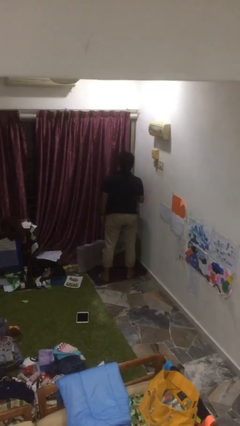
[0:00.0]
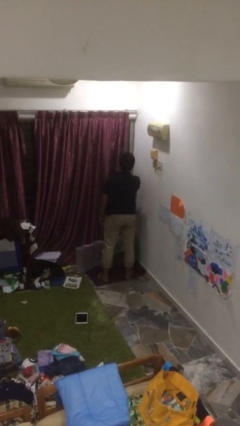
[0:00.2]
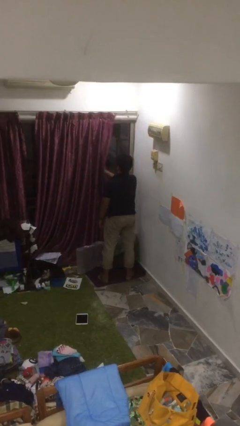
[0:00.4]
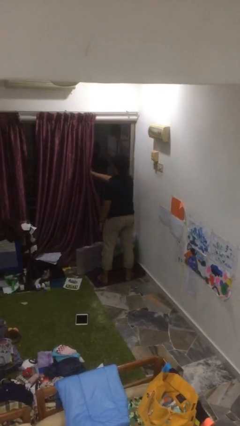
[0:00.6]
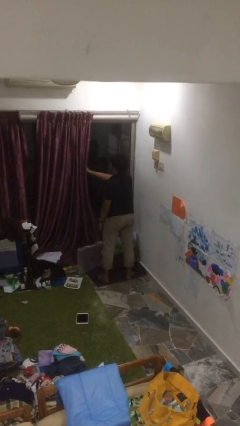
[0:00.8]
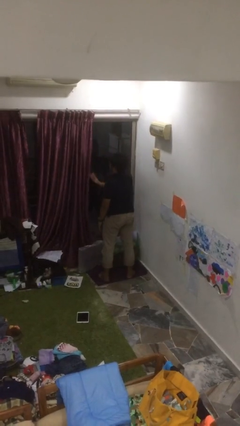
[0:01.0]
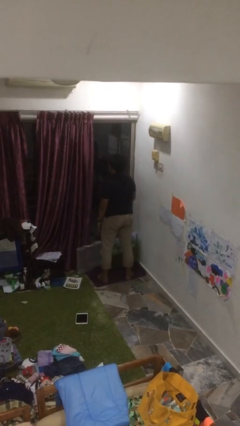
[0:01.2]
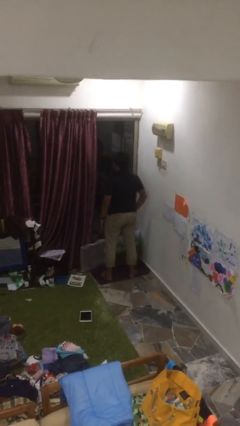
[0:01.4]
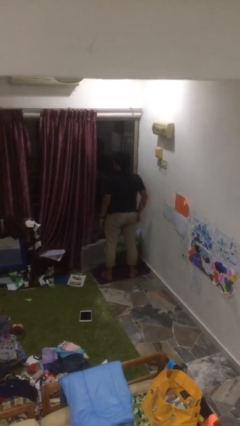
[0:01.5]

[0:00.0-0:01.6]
person opens curtains

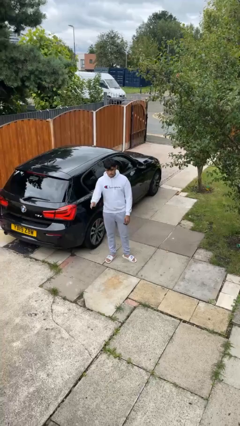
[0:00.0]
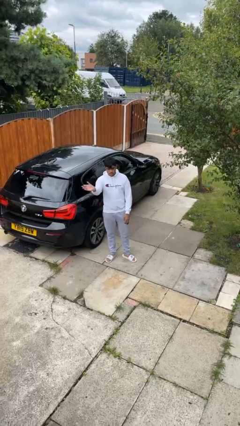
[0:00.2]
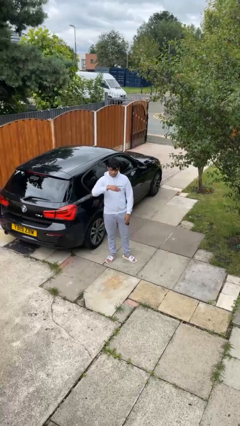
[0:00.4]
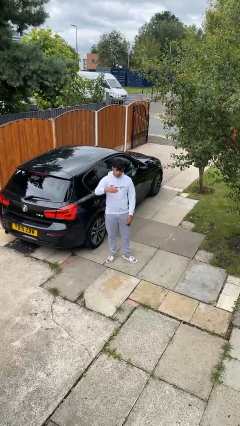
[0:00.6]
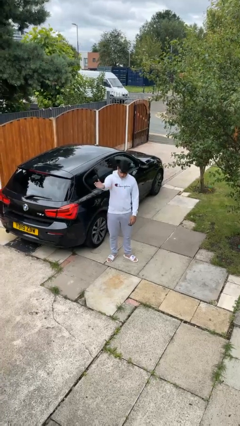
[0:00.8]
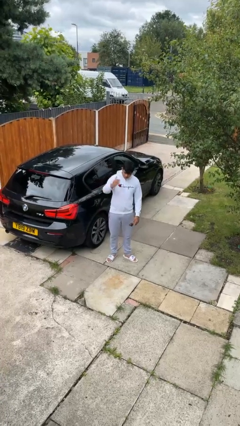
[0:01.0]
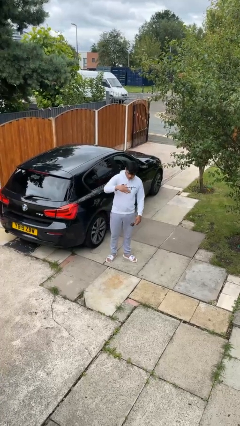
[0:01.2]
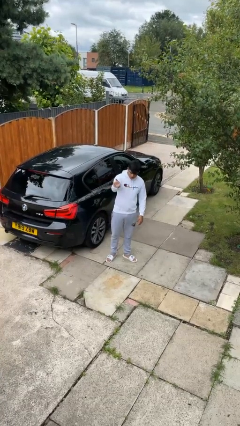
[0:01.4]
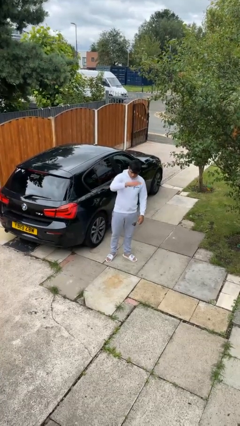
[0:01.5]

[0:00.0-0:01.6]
person gestures come here

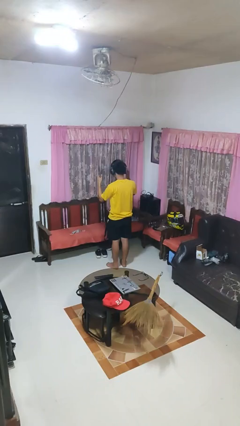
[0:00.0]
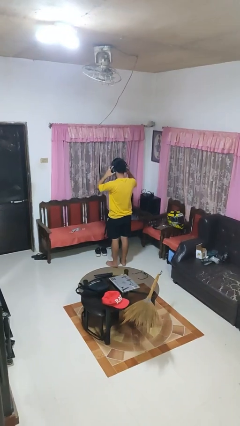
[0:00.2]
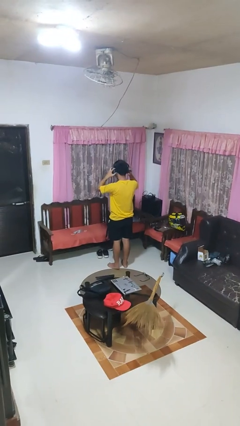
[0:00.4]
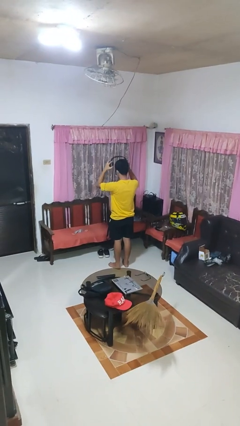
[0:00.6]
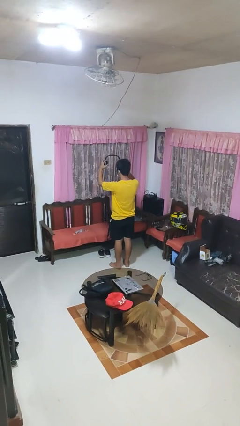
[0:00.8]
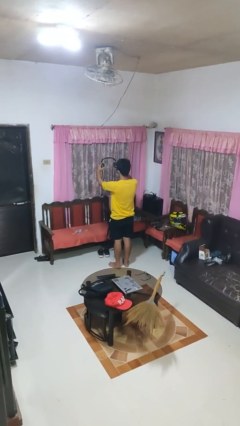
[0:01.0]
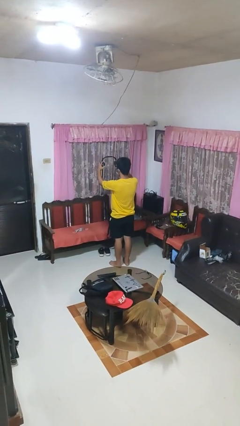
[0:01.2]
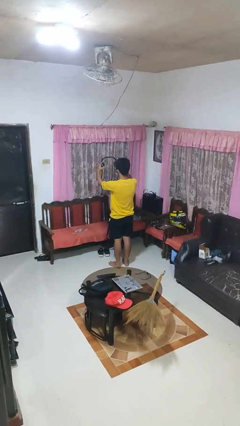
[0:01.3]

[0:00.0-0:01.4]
person takes off headphones

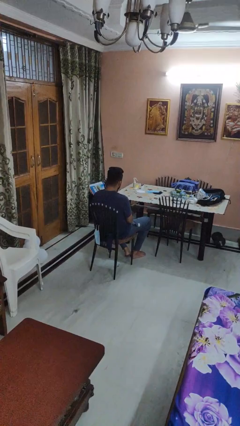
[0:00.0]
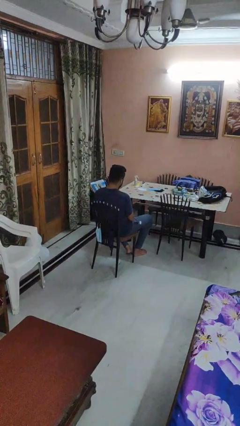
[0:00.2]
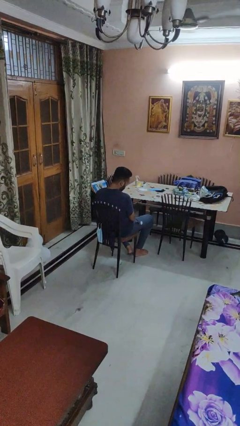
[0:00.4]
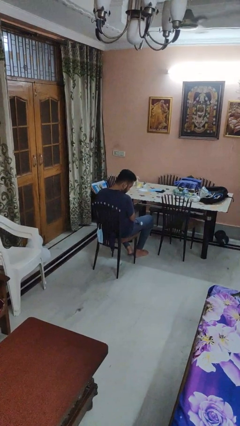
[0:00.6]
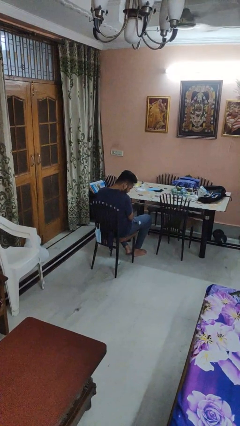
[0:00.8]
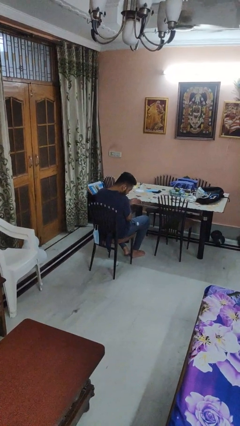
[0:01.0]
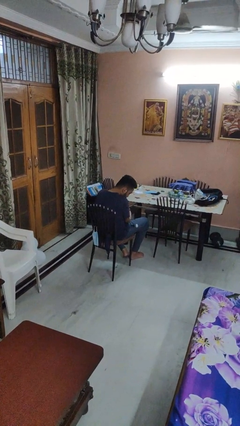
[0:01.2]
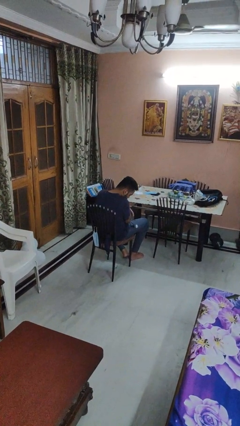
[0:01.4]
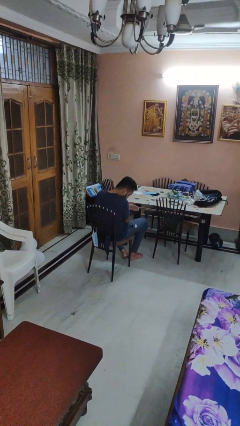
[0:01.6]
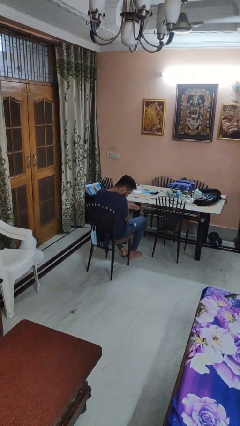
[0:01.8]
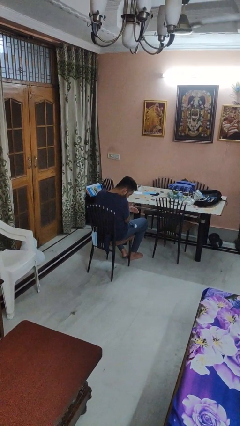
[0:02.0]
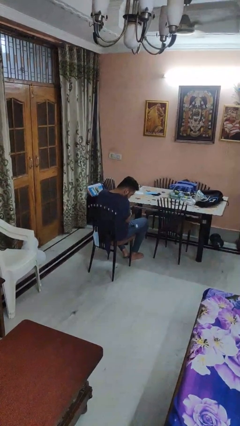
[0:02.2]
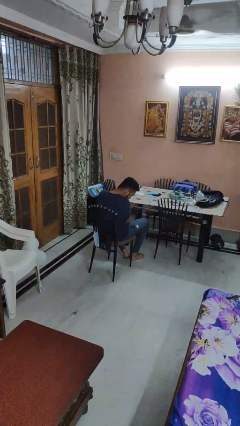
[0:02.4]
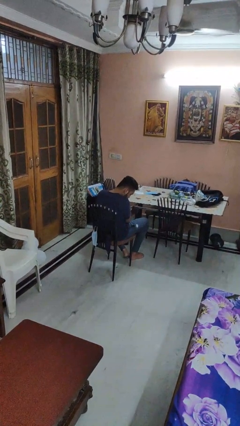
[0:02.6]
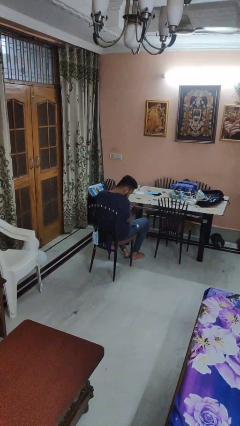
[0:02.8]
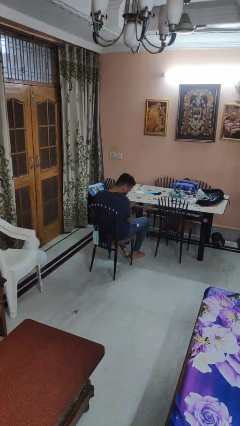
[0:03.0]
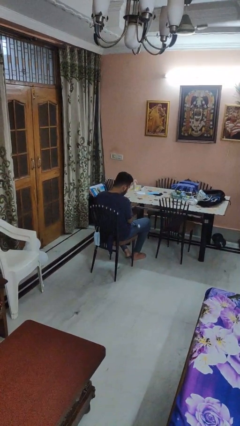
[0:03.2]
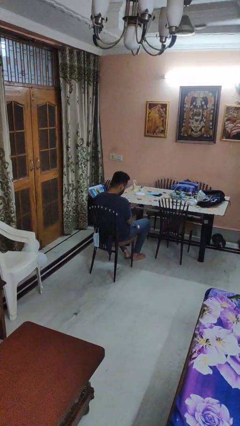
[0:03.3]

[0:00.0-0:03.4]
person swats bug

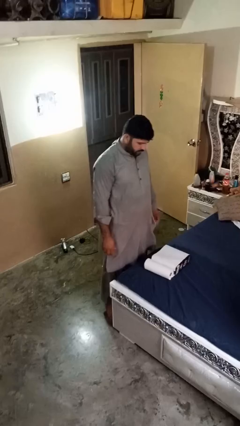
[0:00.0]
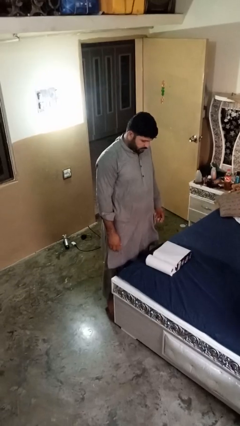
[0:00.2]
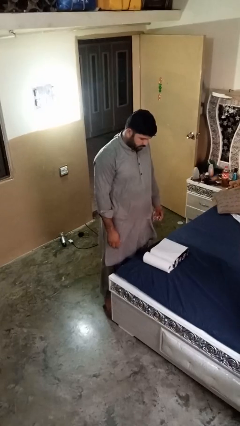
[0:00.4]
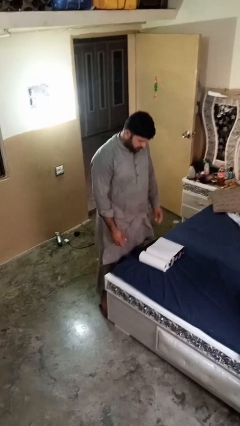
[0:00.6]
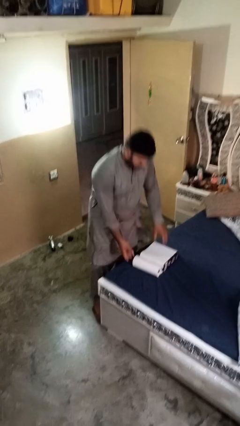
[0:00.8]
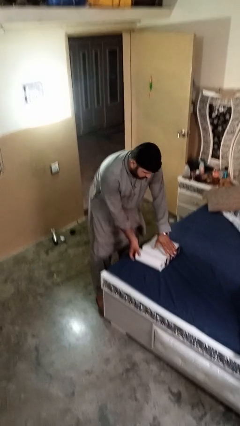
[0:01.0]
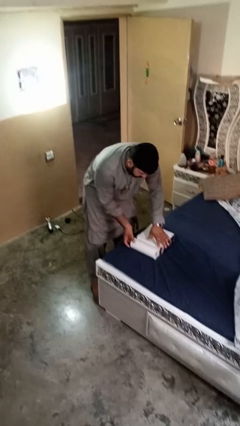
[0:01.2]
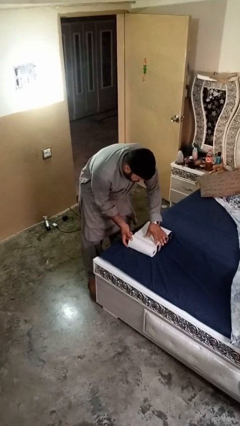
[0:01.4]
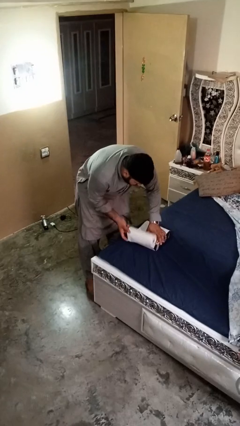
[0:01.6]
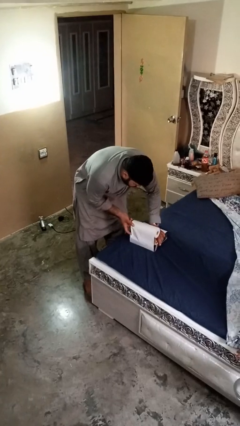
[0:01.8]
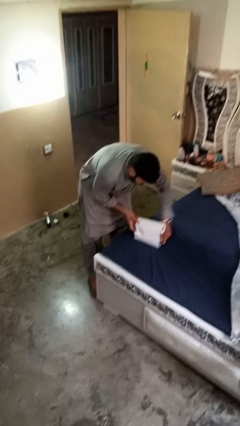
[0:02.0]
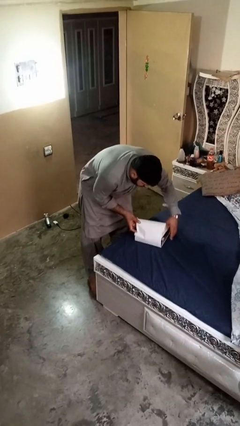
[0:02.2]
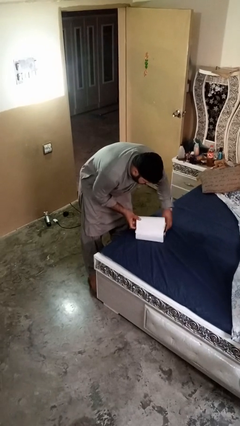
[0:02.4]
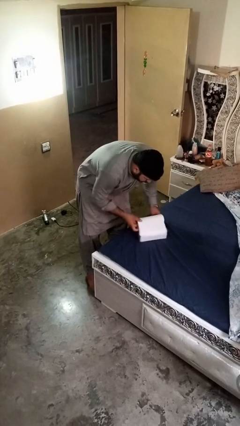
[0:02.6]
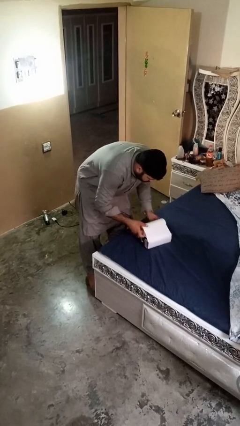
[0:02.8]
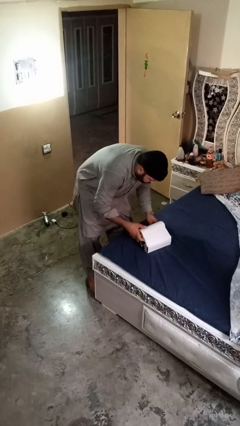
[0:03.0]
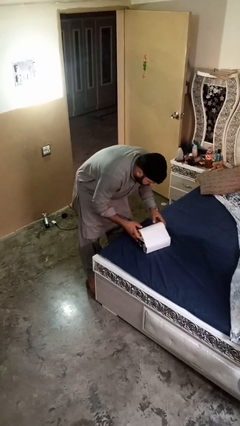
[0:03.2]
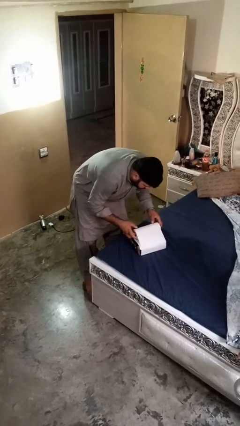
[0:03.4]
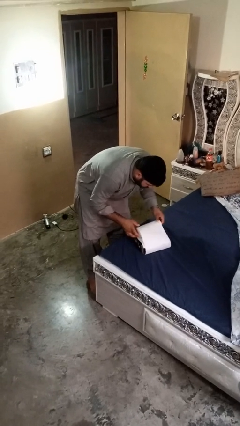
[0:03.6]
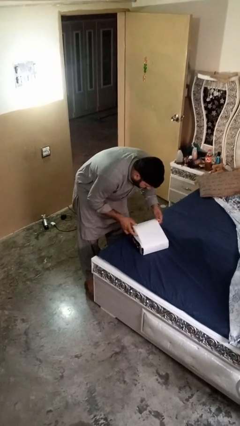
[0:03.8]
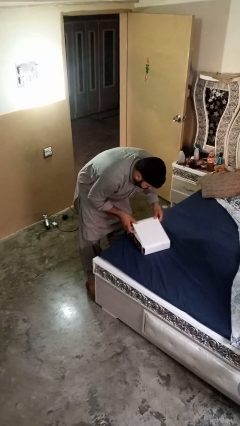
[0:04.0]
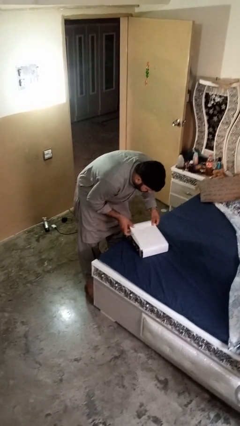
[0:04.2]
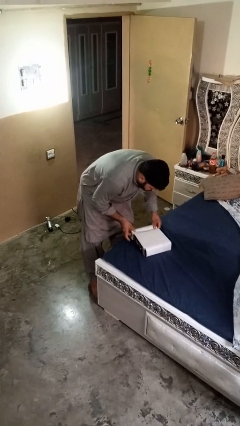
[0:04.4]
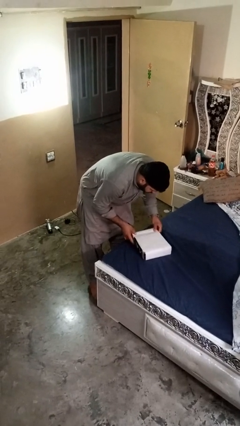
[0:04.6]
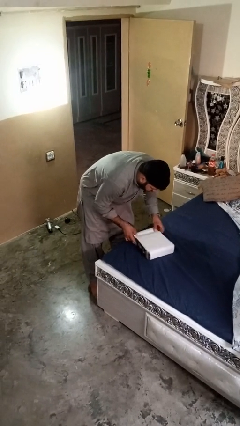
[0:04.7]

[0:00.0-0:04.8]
person wraps box

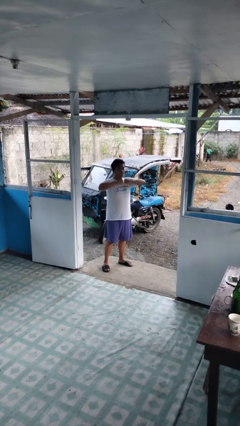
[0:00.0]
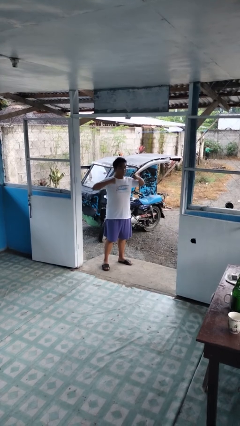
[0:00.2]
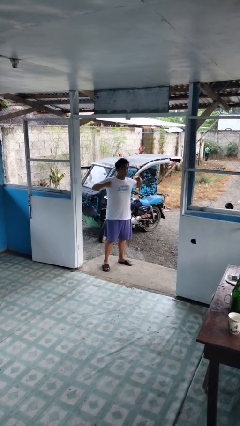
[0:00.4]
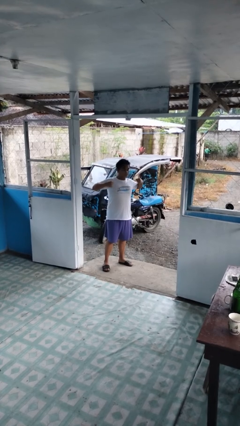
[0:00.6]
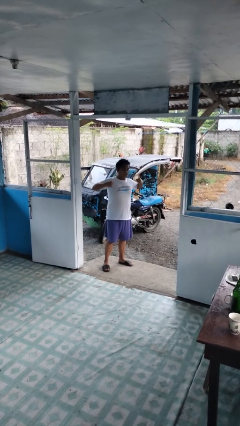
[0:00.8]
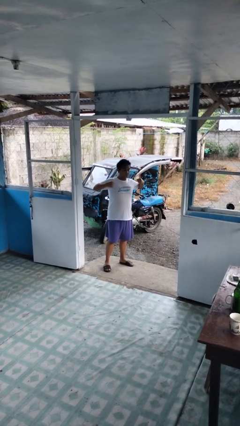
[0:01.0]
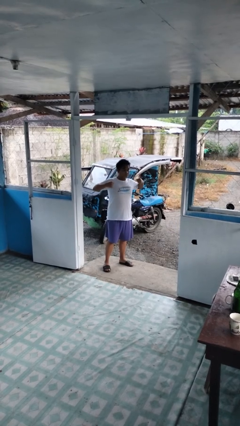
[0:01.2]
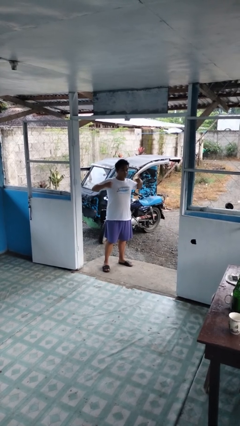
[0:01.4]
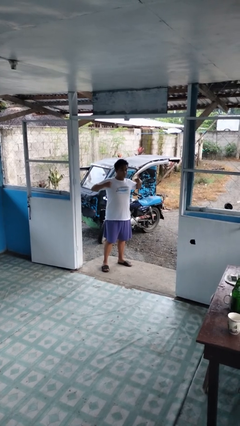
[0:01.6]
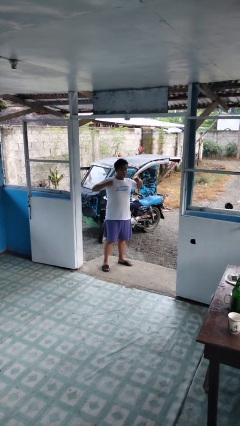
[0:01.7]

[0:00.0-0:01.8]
person gestures zoom in

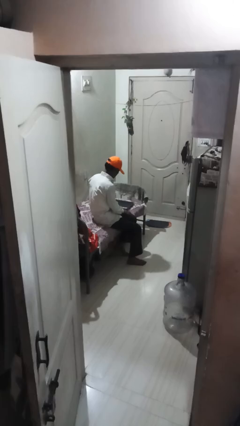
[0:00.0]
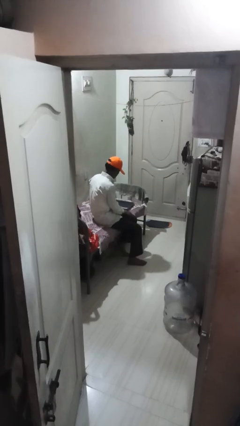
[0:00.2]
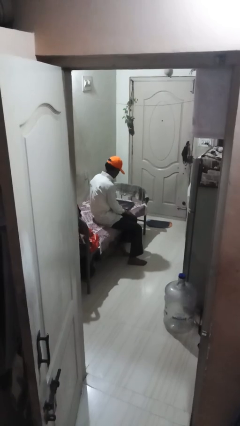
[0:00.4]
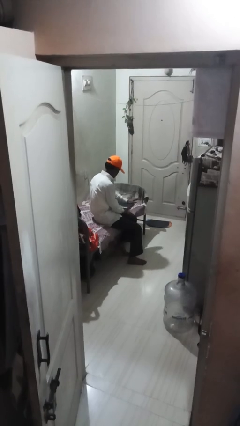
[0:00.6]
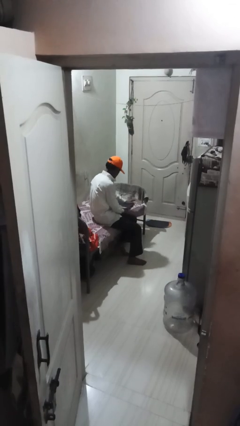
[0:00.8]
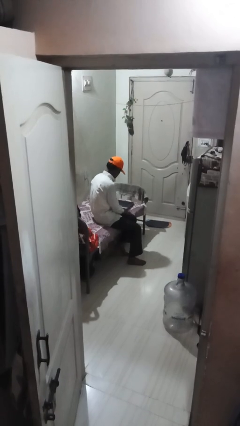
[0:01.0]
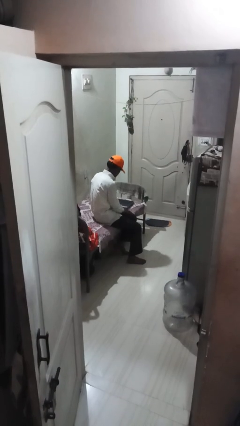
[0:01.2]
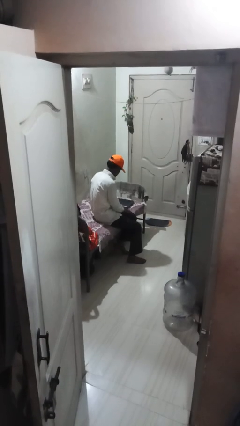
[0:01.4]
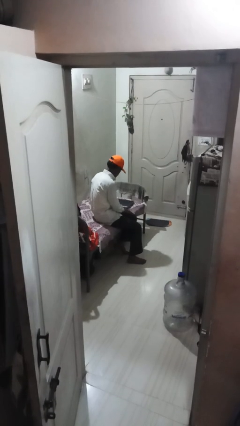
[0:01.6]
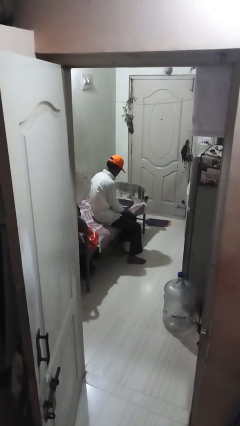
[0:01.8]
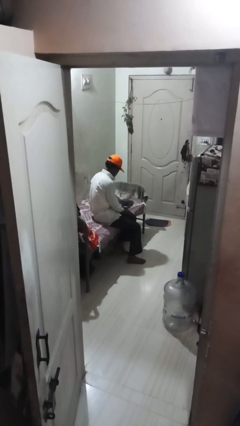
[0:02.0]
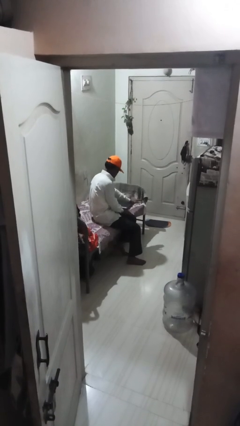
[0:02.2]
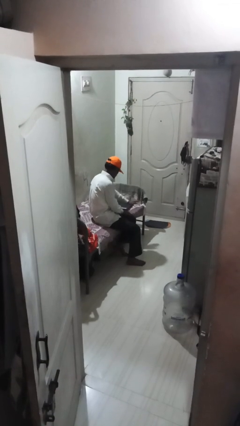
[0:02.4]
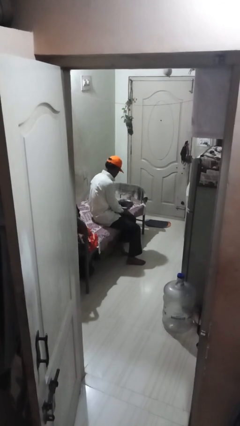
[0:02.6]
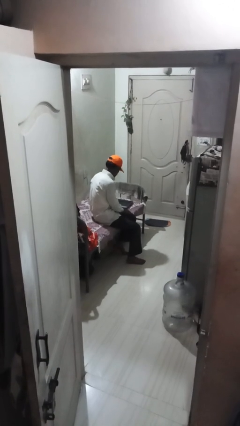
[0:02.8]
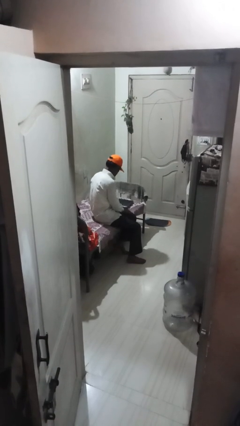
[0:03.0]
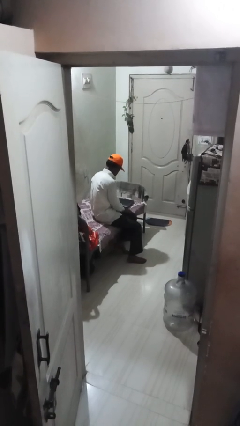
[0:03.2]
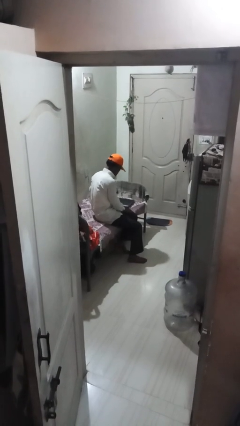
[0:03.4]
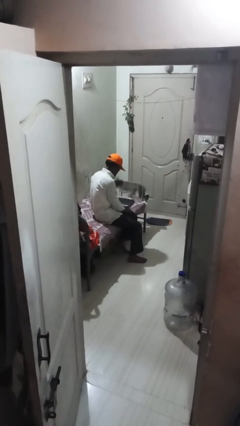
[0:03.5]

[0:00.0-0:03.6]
person waves hand over object
